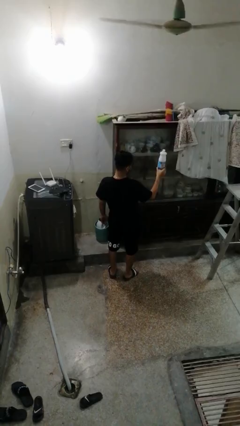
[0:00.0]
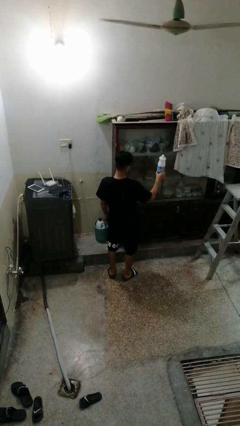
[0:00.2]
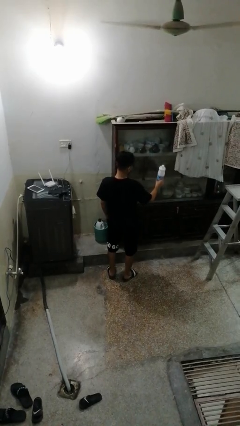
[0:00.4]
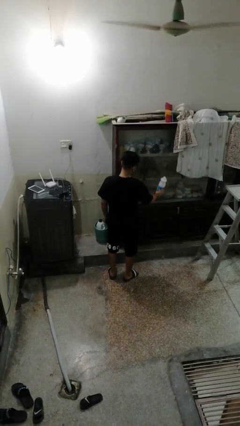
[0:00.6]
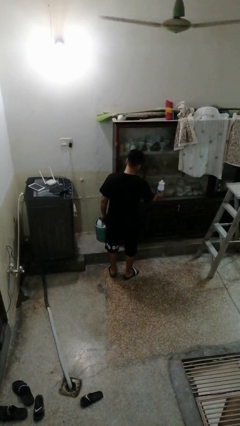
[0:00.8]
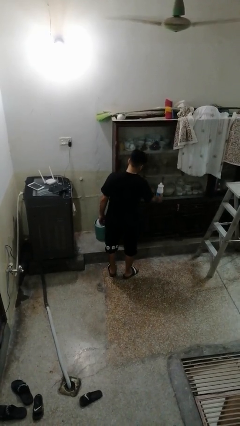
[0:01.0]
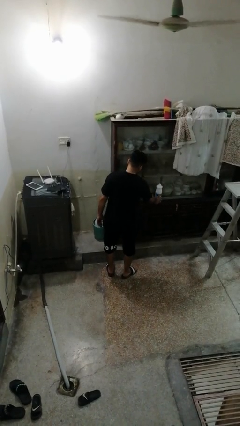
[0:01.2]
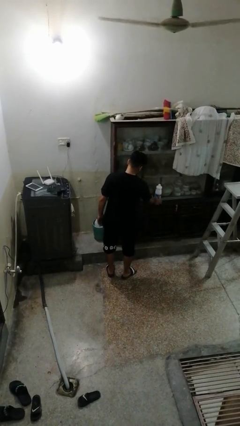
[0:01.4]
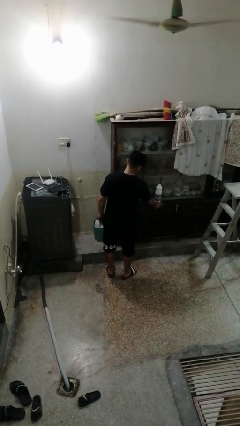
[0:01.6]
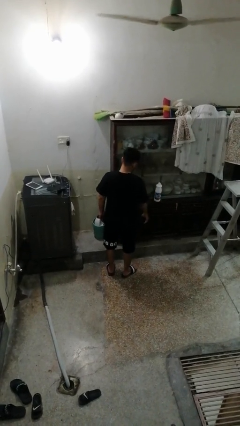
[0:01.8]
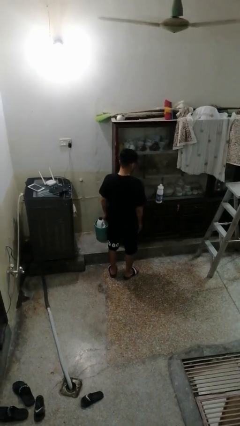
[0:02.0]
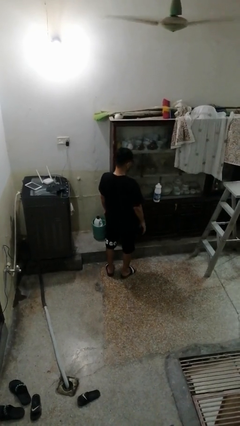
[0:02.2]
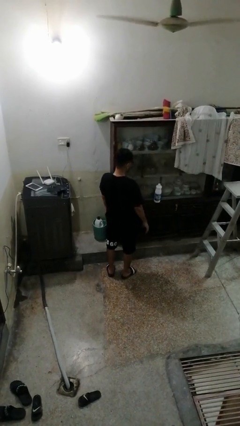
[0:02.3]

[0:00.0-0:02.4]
person puts down object on shelf

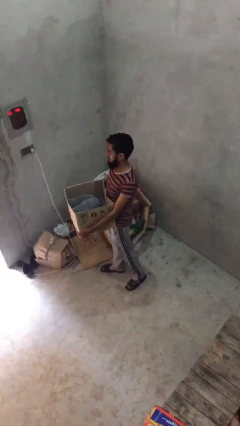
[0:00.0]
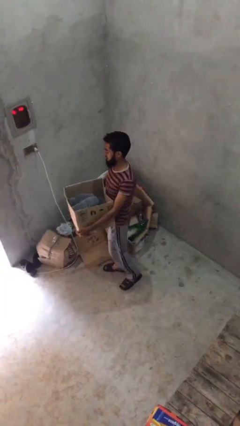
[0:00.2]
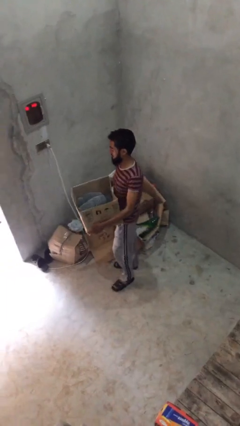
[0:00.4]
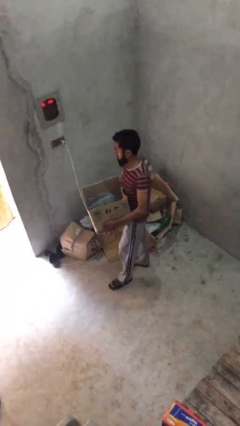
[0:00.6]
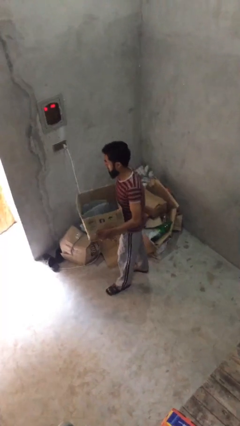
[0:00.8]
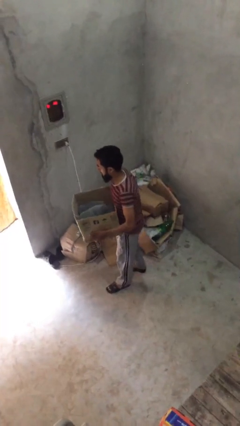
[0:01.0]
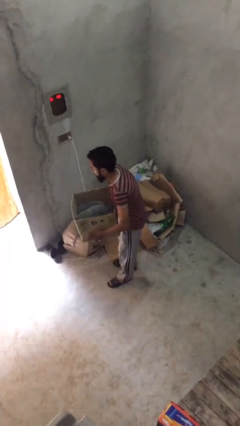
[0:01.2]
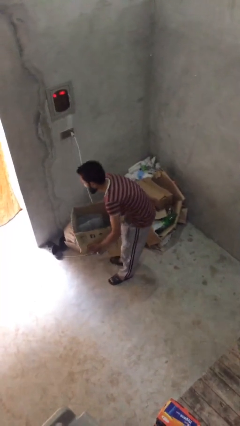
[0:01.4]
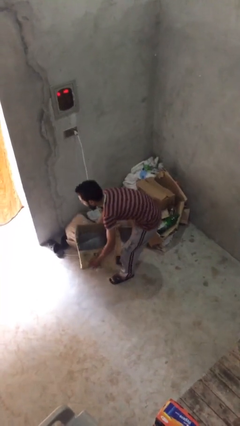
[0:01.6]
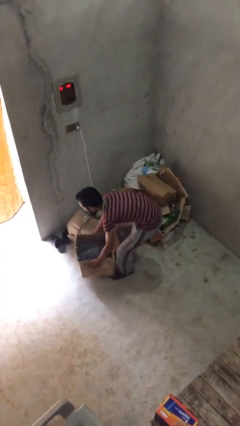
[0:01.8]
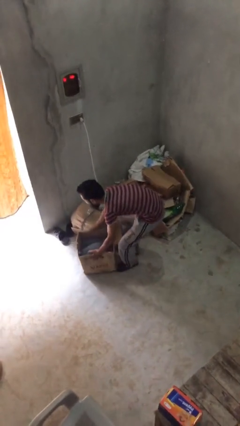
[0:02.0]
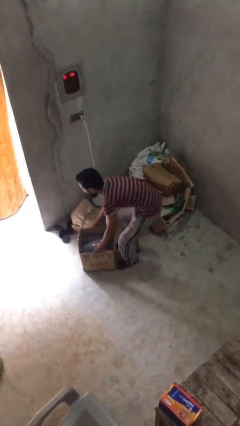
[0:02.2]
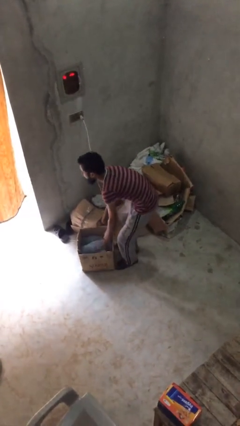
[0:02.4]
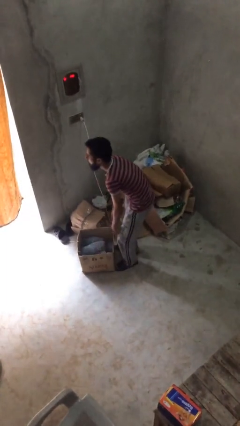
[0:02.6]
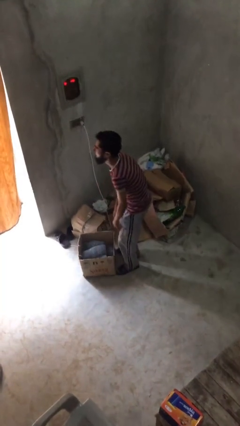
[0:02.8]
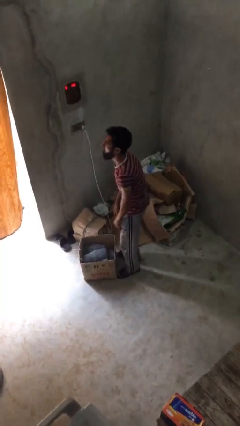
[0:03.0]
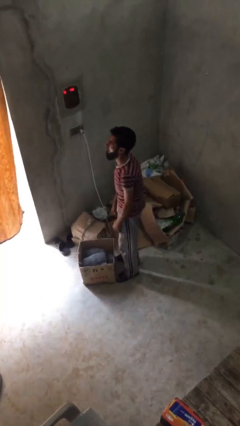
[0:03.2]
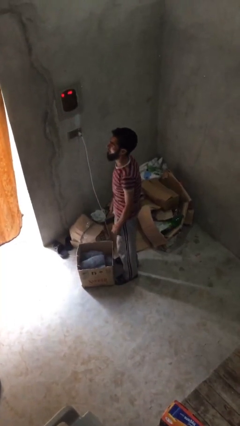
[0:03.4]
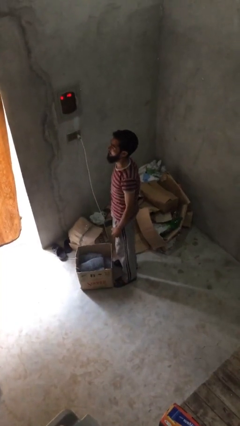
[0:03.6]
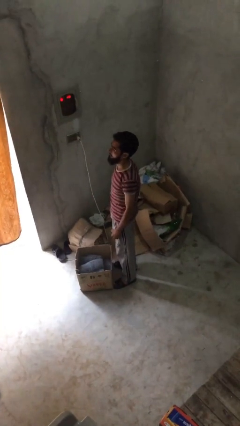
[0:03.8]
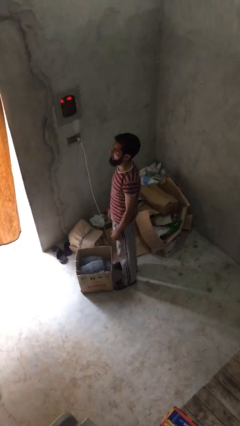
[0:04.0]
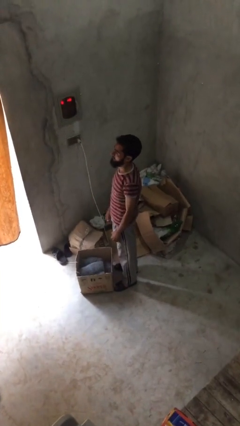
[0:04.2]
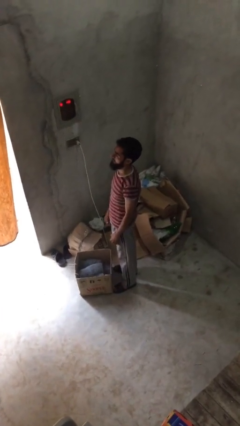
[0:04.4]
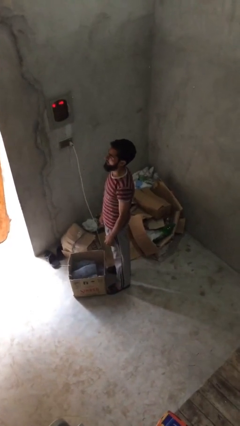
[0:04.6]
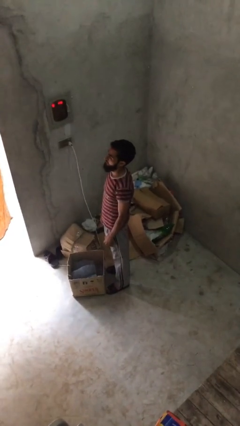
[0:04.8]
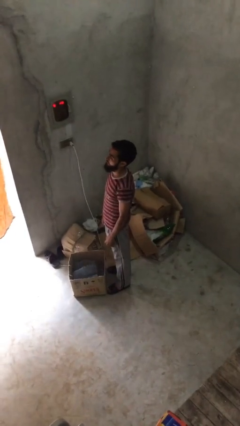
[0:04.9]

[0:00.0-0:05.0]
person puts down object on floor

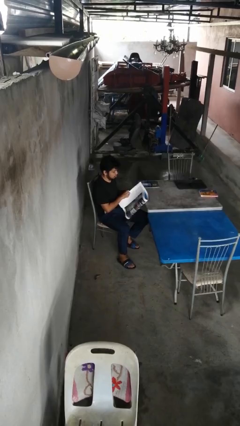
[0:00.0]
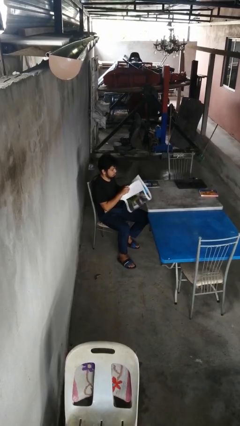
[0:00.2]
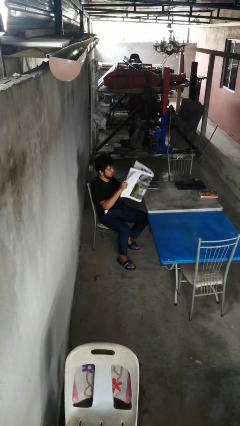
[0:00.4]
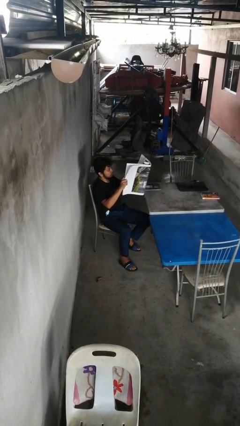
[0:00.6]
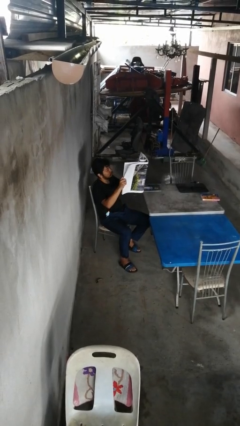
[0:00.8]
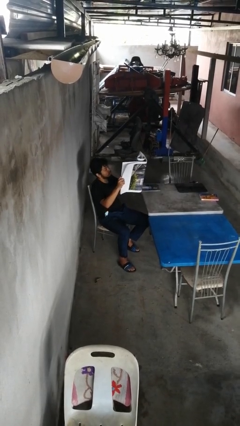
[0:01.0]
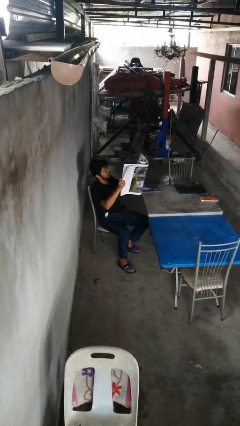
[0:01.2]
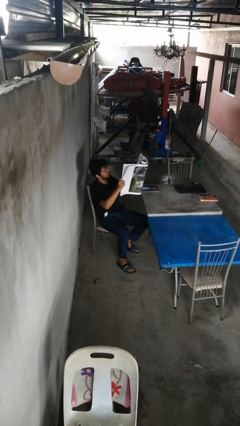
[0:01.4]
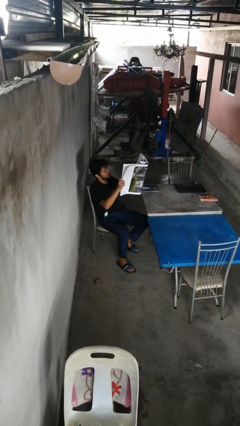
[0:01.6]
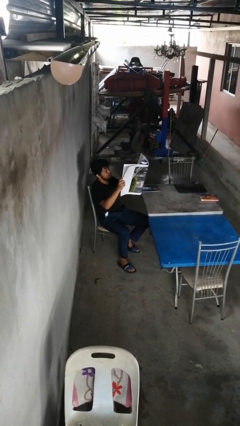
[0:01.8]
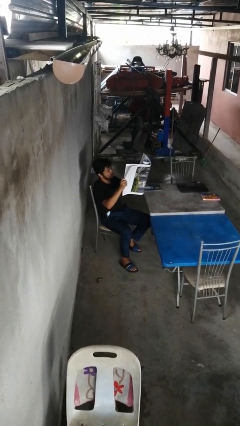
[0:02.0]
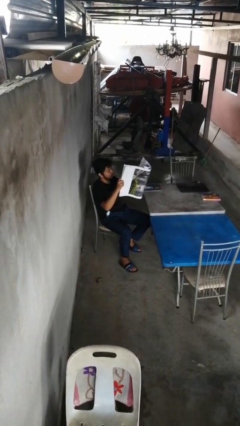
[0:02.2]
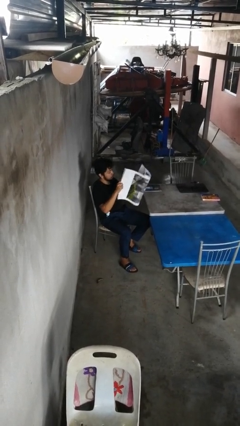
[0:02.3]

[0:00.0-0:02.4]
person reads newspaper

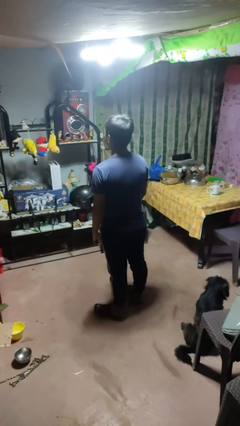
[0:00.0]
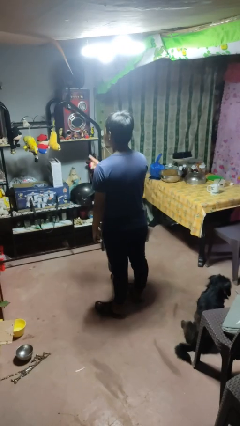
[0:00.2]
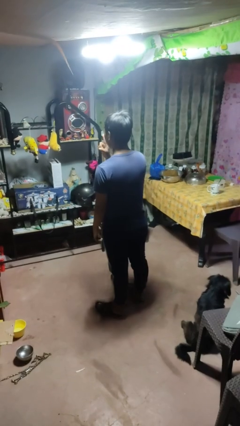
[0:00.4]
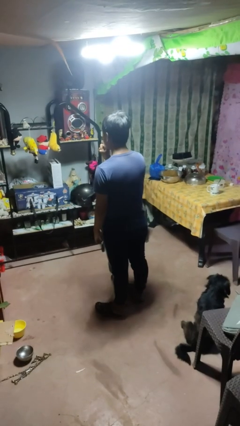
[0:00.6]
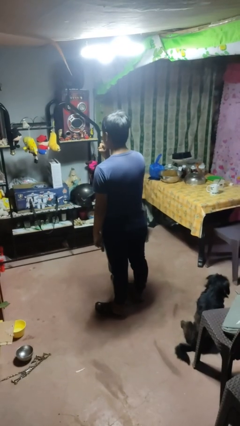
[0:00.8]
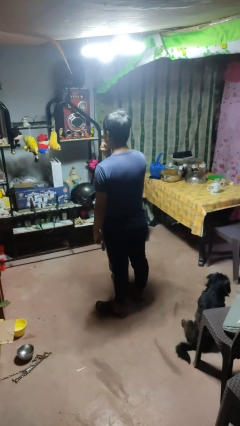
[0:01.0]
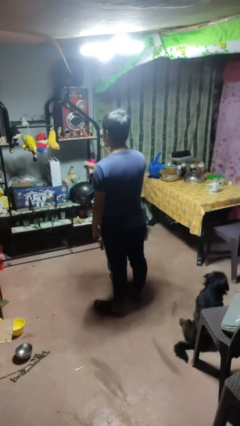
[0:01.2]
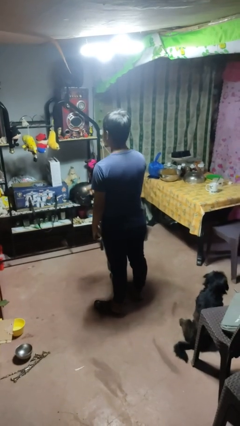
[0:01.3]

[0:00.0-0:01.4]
person gestures be quiet

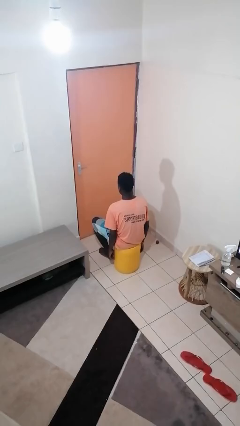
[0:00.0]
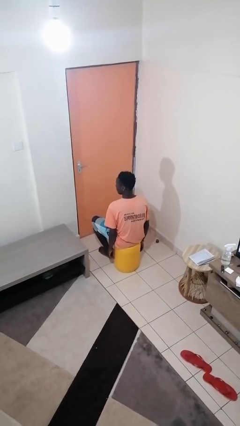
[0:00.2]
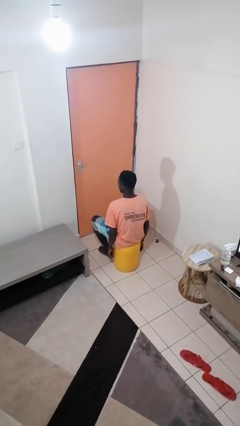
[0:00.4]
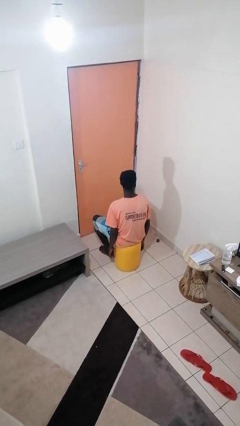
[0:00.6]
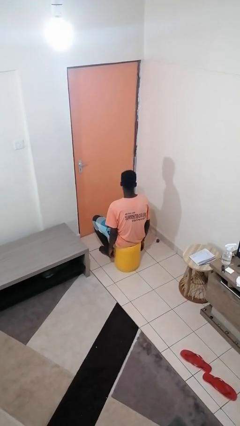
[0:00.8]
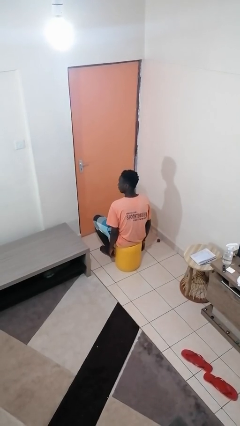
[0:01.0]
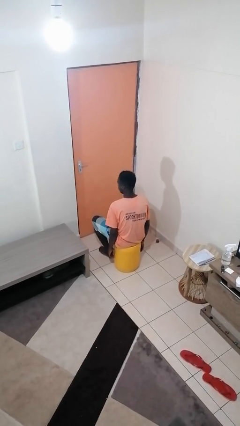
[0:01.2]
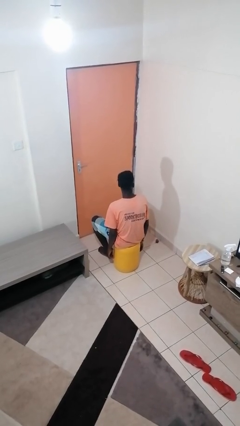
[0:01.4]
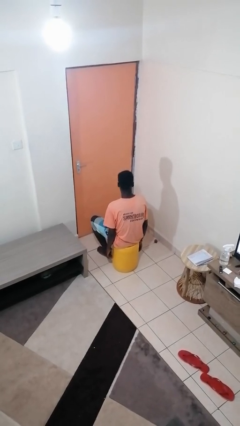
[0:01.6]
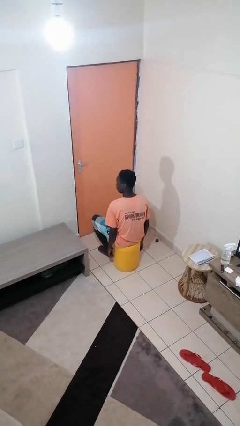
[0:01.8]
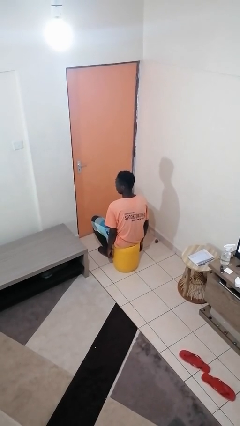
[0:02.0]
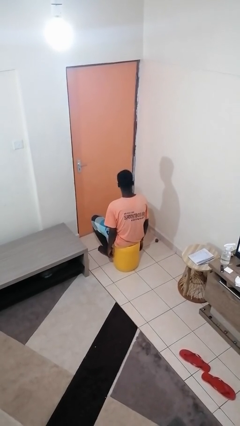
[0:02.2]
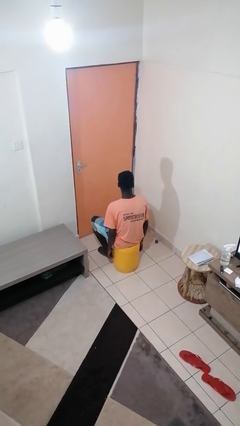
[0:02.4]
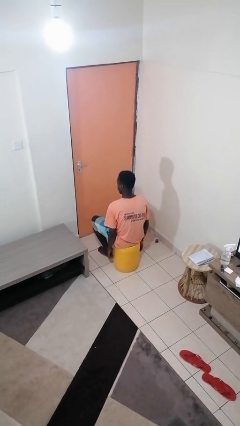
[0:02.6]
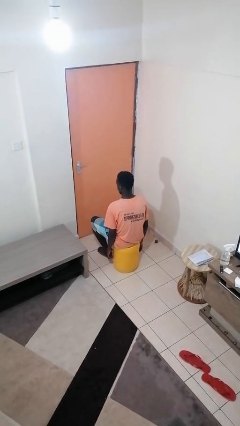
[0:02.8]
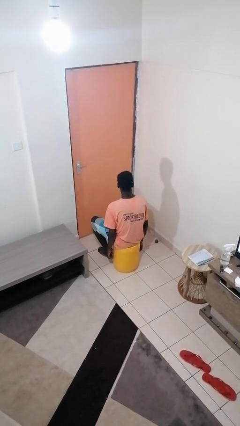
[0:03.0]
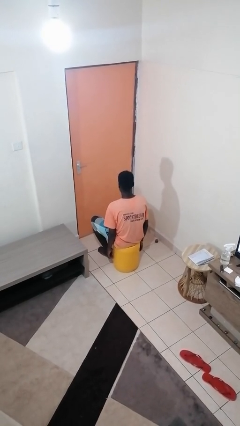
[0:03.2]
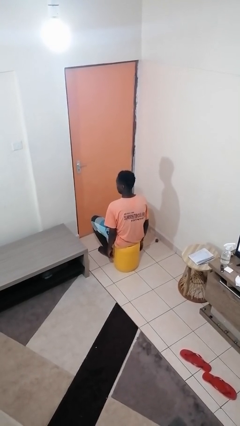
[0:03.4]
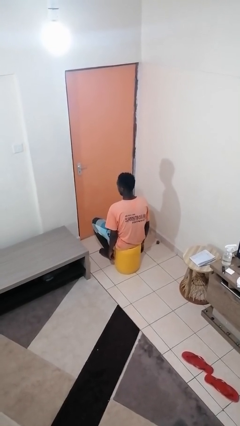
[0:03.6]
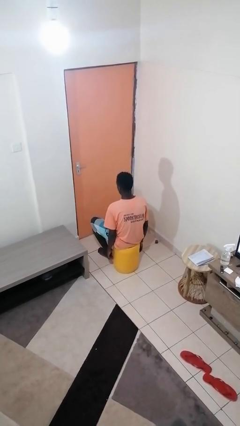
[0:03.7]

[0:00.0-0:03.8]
person shakes head

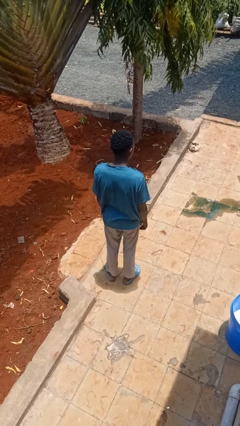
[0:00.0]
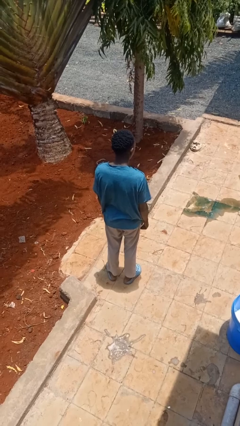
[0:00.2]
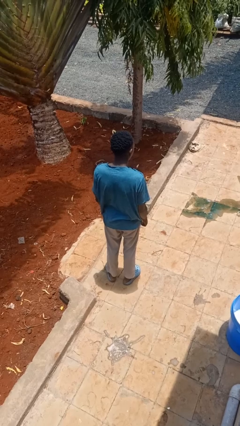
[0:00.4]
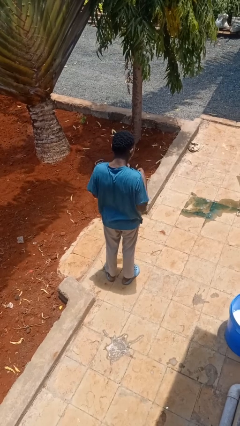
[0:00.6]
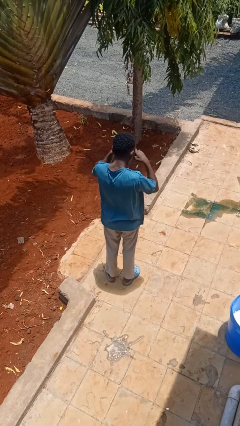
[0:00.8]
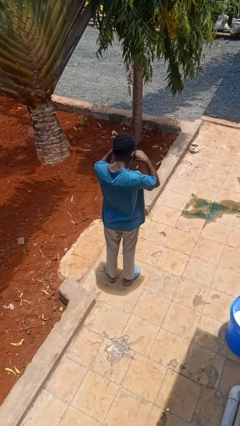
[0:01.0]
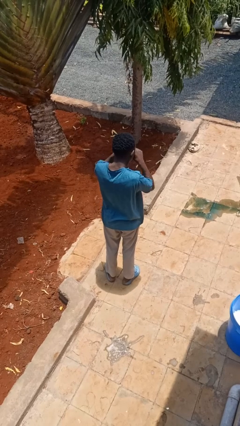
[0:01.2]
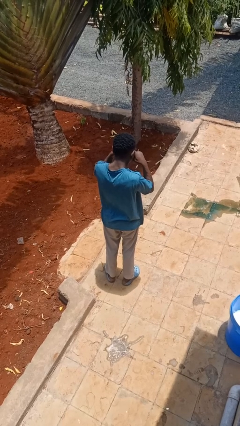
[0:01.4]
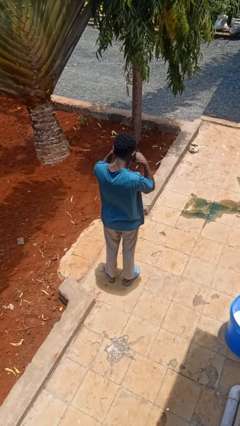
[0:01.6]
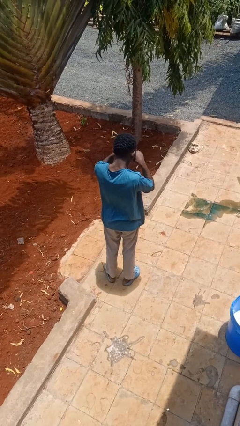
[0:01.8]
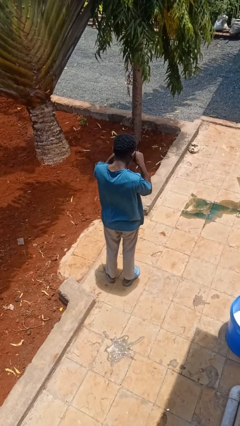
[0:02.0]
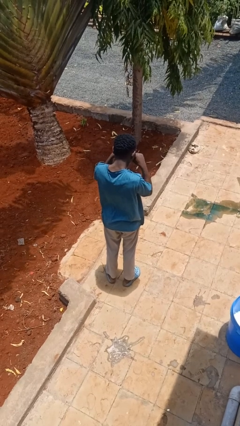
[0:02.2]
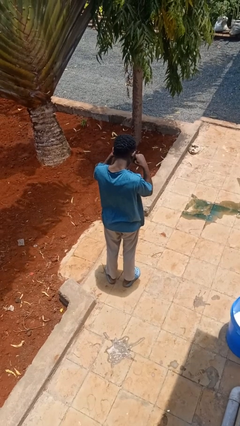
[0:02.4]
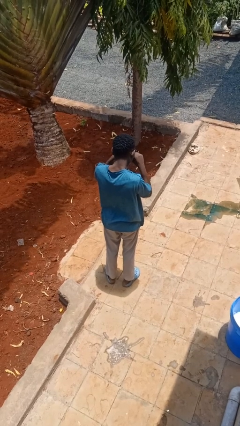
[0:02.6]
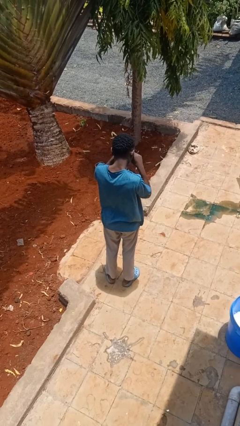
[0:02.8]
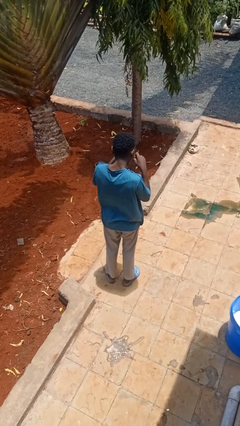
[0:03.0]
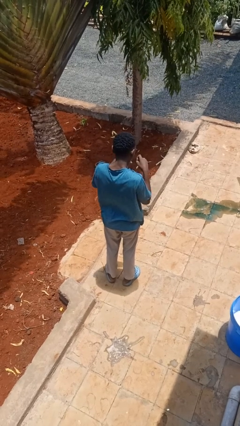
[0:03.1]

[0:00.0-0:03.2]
person rubs eyes
